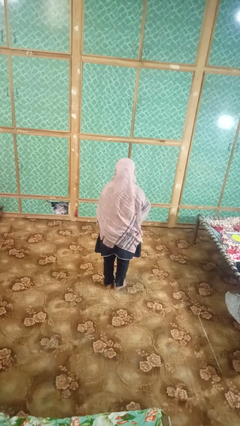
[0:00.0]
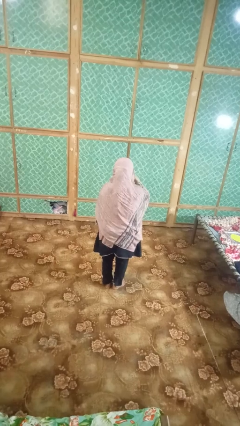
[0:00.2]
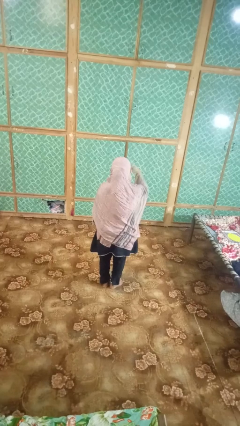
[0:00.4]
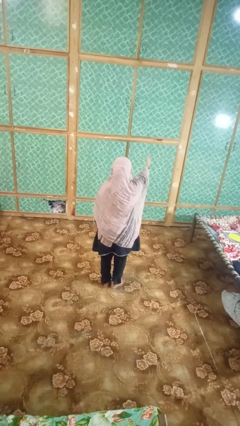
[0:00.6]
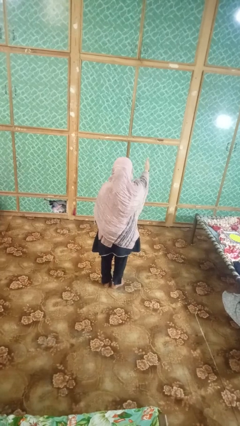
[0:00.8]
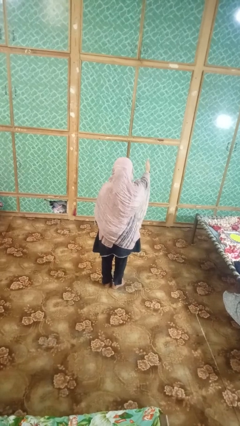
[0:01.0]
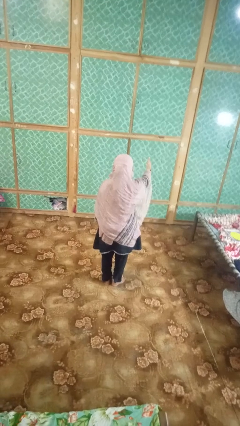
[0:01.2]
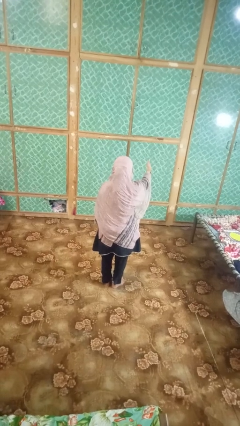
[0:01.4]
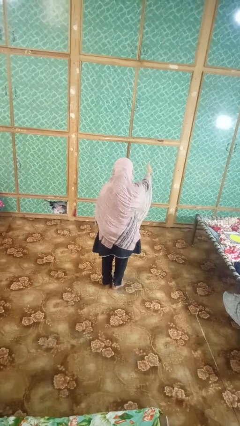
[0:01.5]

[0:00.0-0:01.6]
person gestures blow kiss

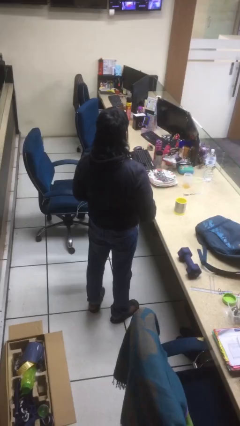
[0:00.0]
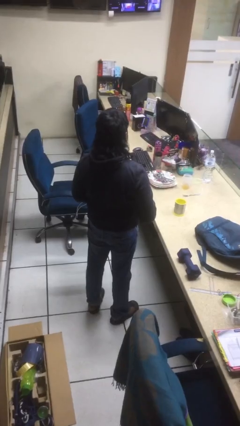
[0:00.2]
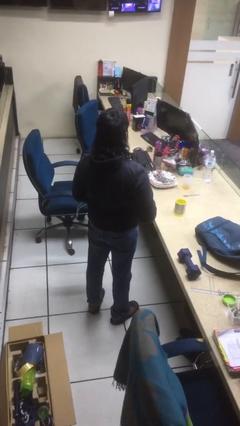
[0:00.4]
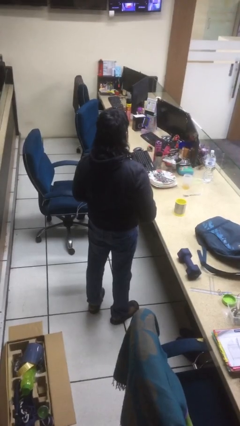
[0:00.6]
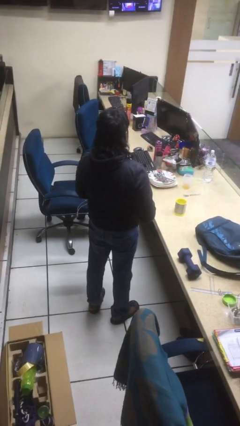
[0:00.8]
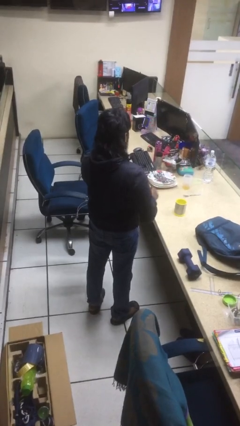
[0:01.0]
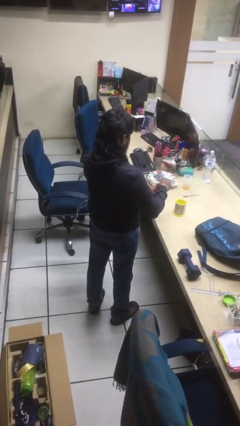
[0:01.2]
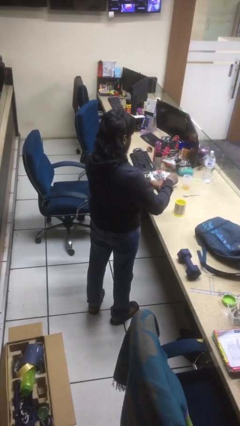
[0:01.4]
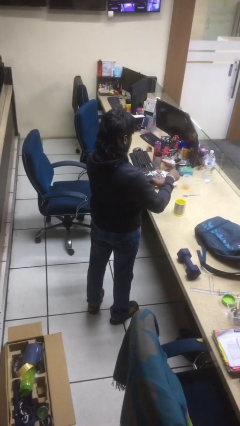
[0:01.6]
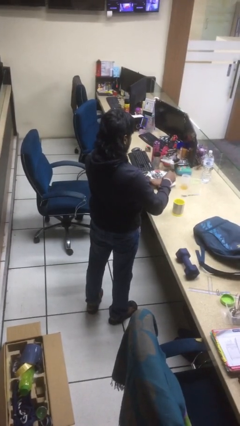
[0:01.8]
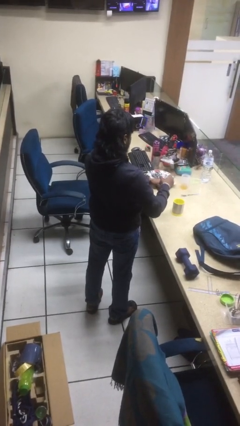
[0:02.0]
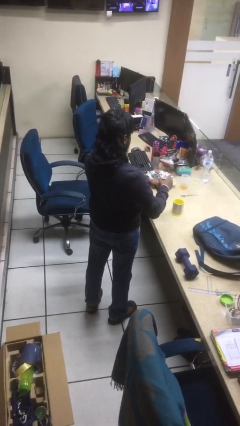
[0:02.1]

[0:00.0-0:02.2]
person opens beverage can

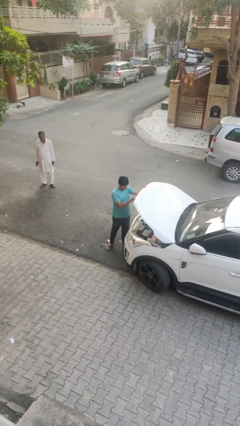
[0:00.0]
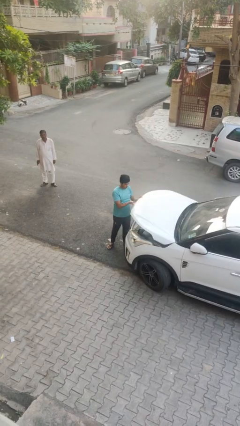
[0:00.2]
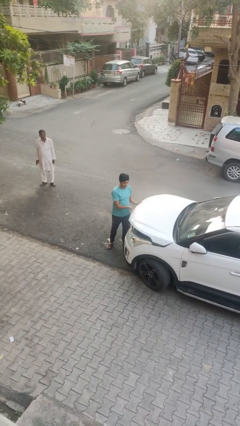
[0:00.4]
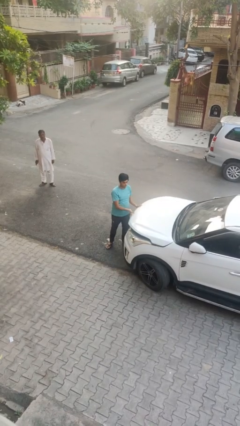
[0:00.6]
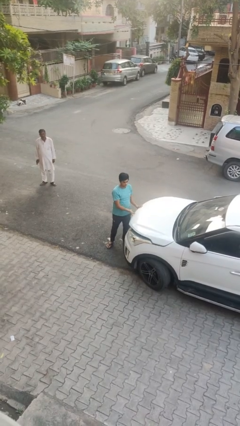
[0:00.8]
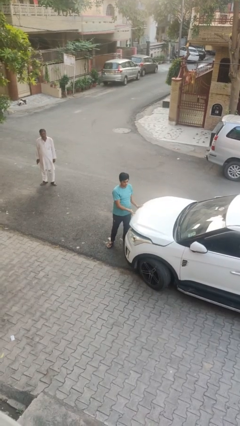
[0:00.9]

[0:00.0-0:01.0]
person closes car hood

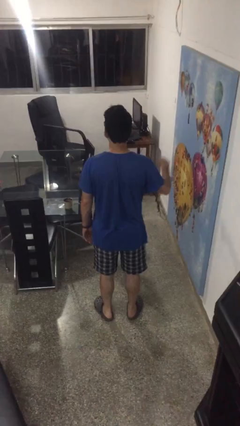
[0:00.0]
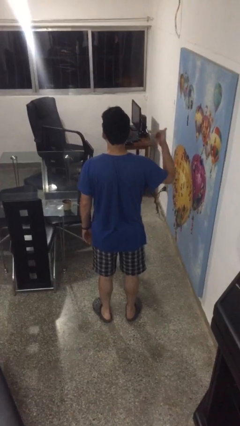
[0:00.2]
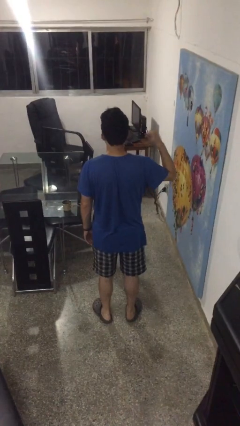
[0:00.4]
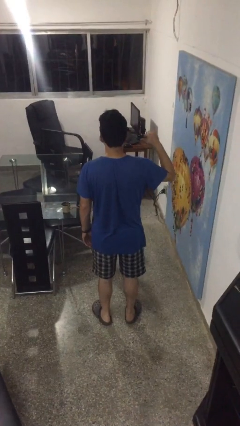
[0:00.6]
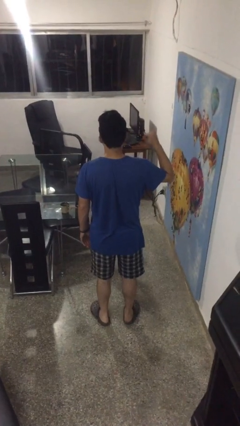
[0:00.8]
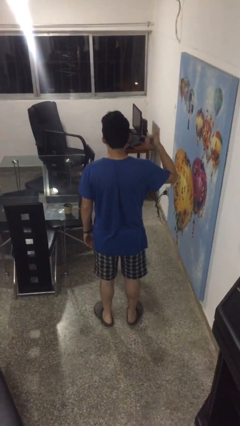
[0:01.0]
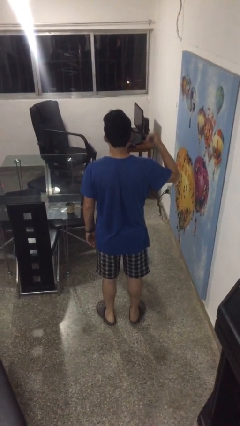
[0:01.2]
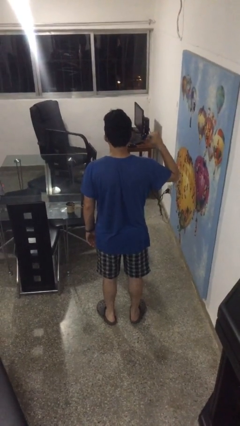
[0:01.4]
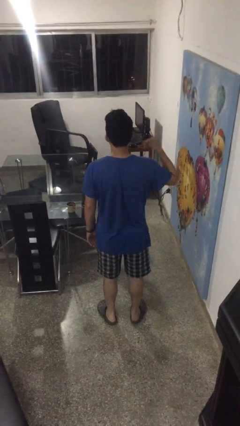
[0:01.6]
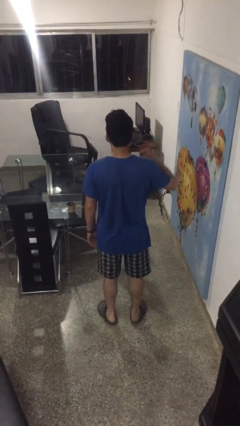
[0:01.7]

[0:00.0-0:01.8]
person gestures hang loose

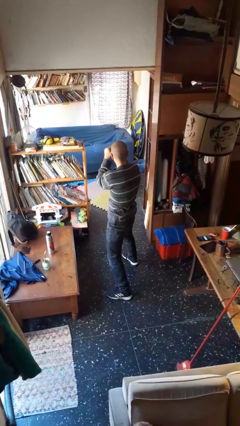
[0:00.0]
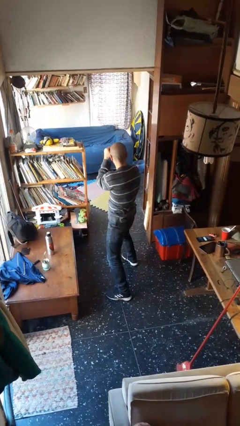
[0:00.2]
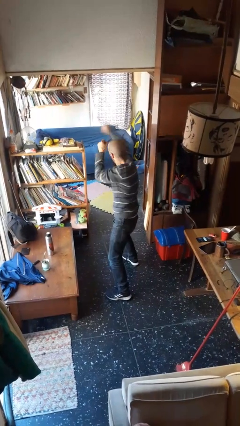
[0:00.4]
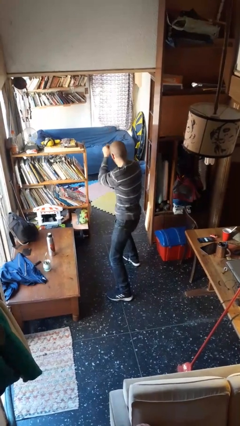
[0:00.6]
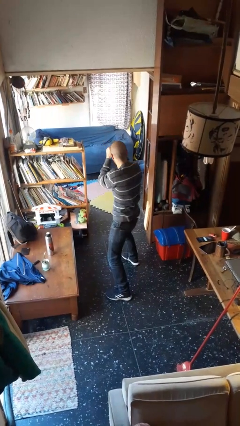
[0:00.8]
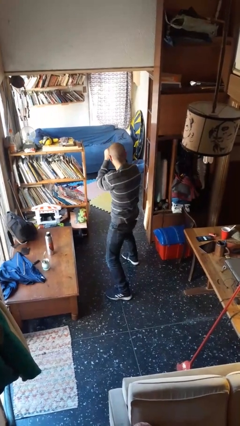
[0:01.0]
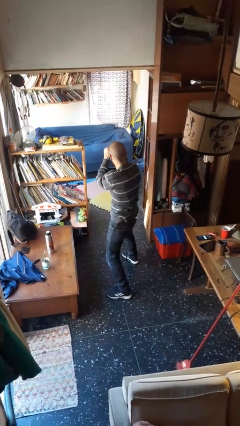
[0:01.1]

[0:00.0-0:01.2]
person punches

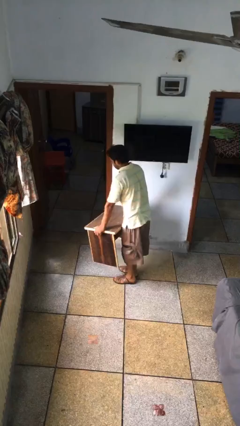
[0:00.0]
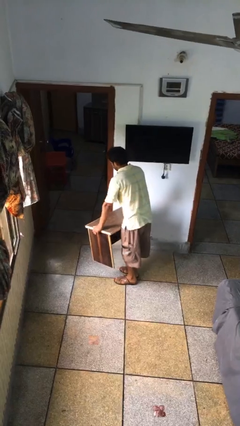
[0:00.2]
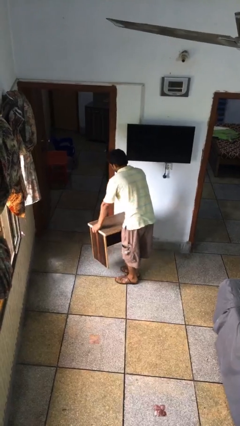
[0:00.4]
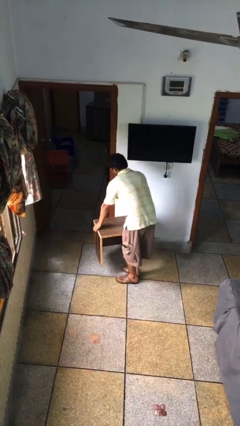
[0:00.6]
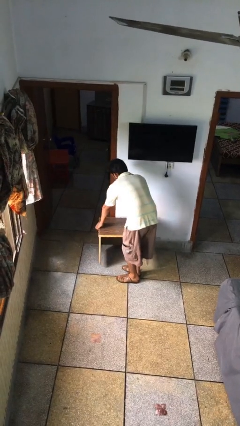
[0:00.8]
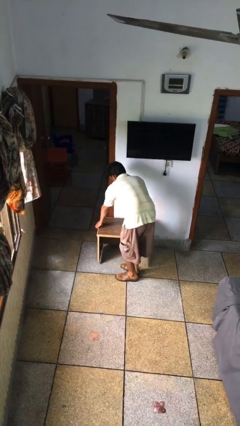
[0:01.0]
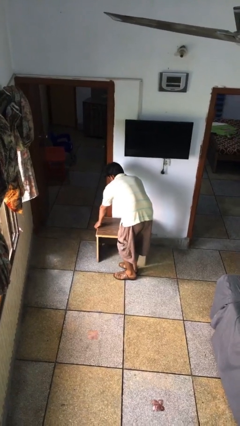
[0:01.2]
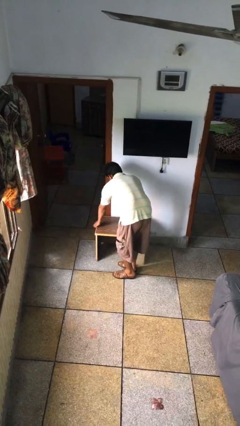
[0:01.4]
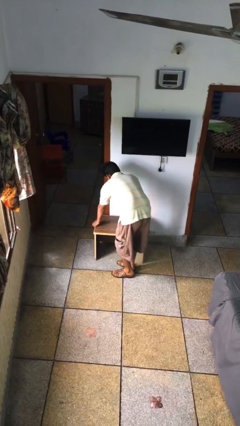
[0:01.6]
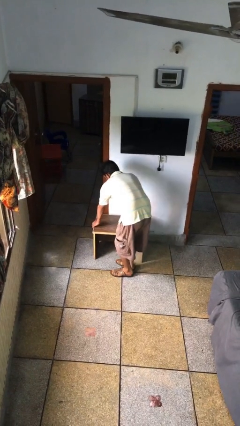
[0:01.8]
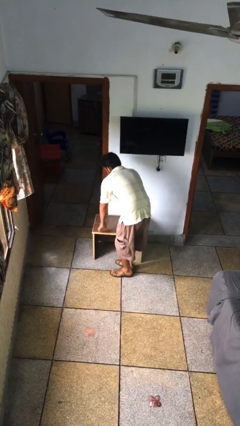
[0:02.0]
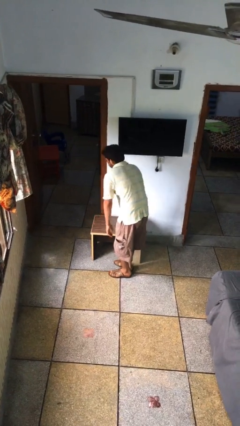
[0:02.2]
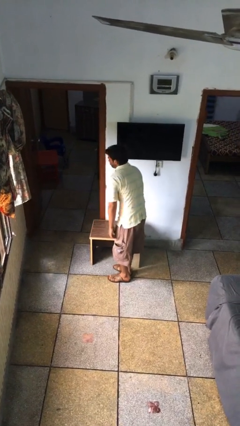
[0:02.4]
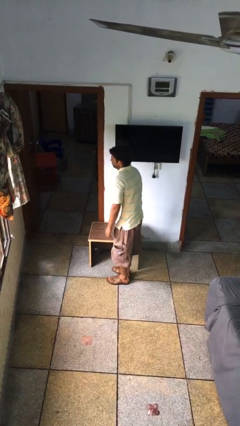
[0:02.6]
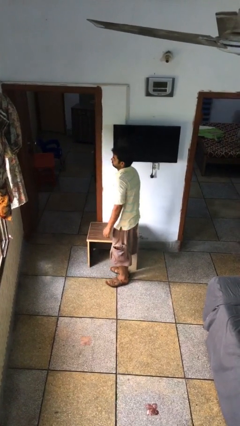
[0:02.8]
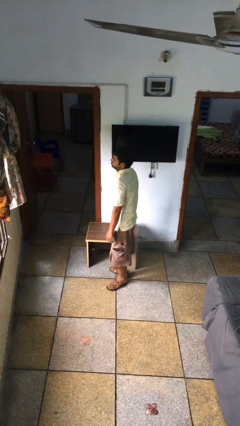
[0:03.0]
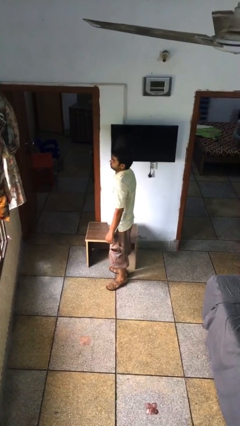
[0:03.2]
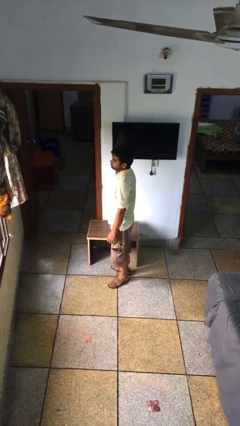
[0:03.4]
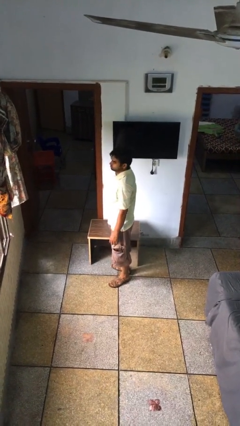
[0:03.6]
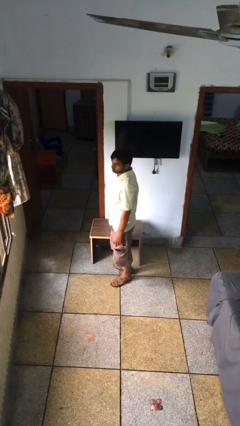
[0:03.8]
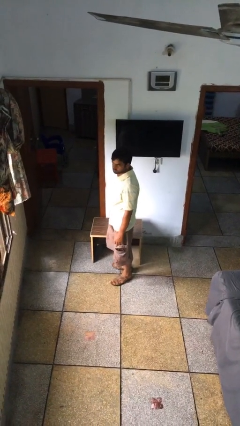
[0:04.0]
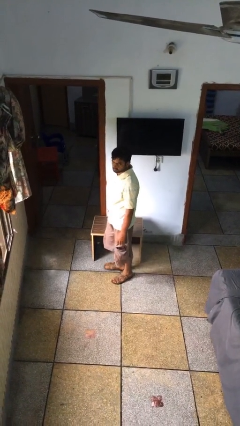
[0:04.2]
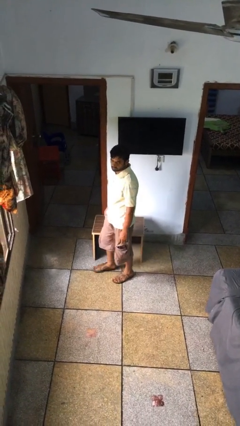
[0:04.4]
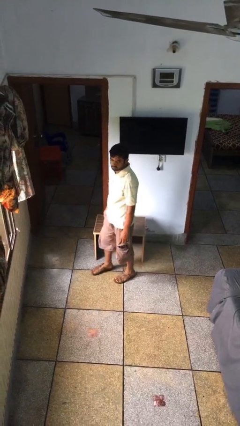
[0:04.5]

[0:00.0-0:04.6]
person puts down object on floor

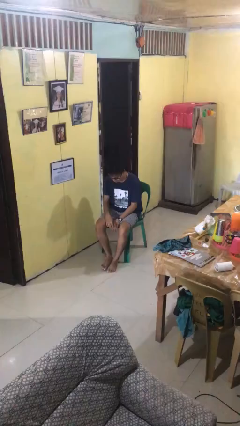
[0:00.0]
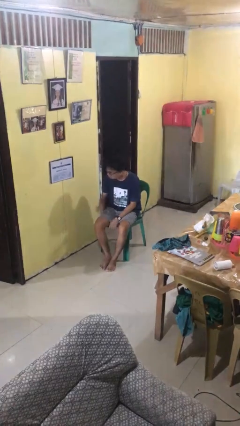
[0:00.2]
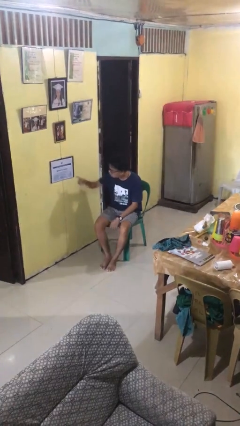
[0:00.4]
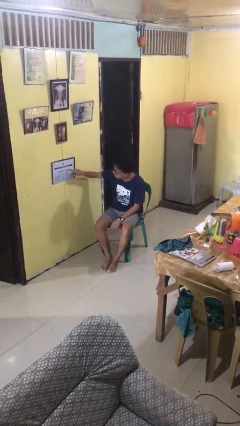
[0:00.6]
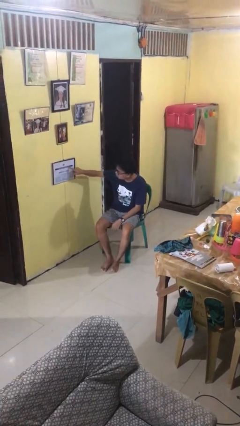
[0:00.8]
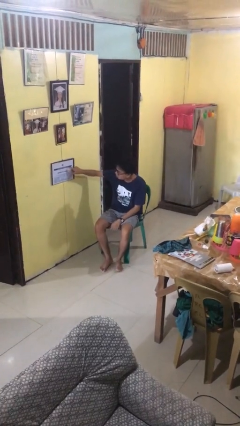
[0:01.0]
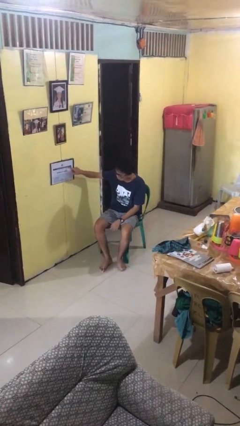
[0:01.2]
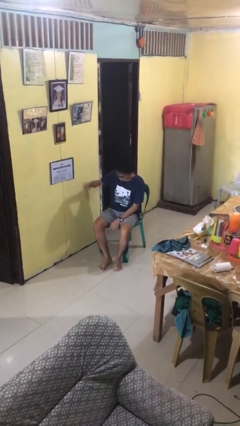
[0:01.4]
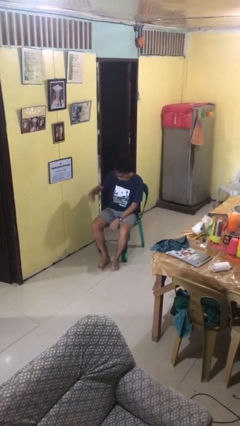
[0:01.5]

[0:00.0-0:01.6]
person taps object with finger

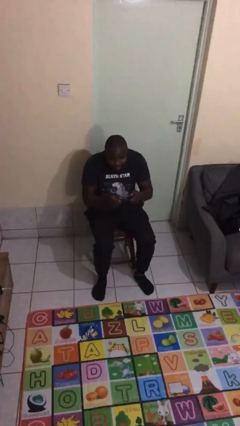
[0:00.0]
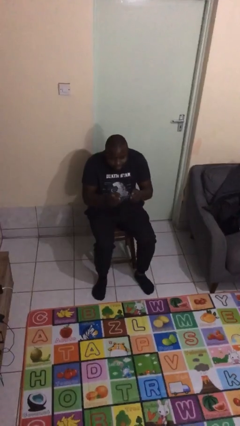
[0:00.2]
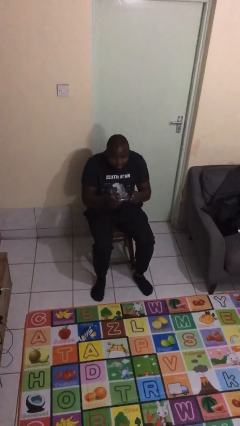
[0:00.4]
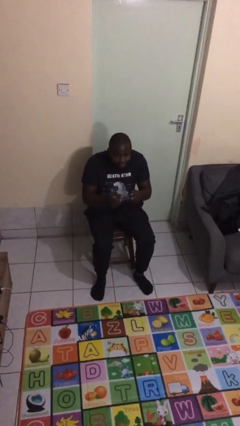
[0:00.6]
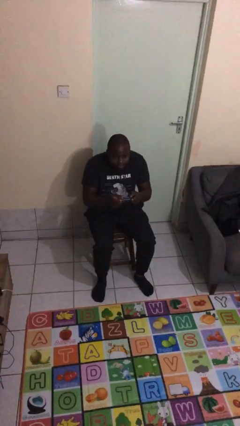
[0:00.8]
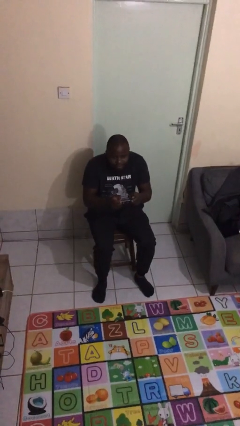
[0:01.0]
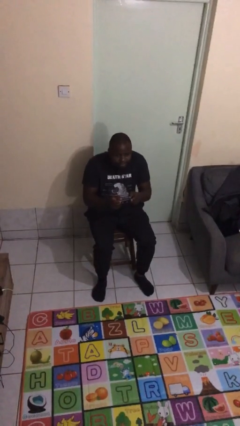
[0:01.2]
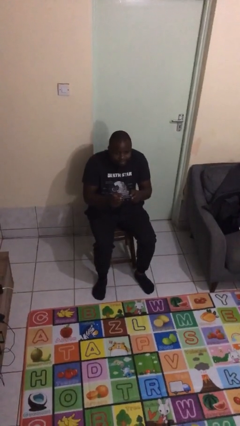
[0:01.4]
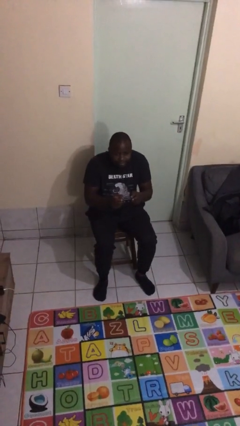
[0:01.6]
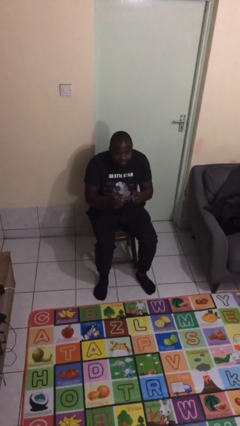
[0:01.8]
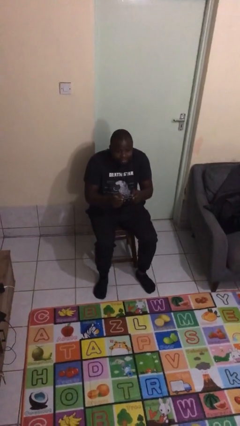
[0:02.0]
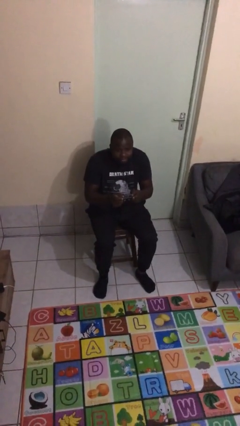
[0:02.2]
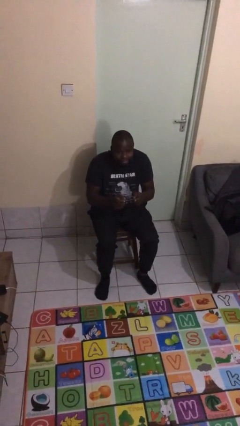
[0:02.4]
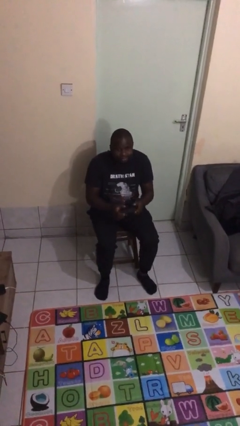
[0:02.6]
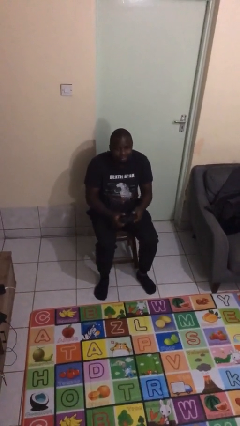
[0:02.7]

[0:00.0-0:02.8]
person interacts with handheld game
